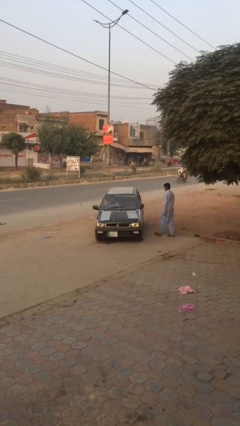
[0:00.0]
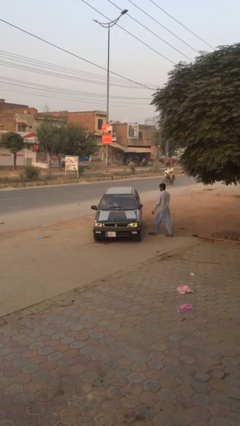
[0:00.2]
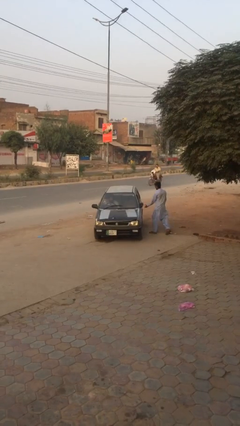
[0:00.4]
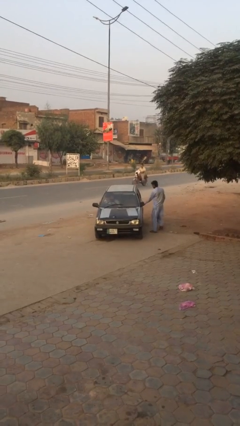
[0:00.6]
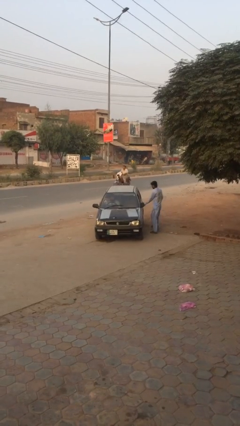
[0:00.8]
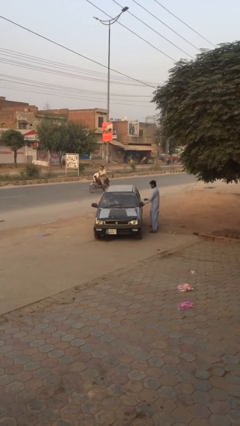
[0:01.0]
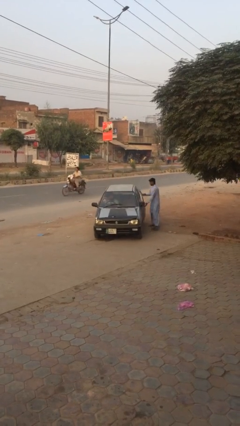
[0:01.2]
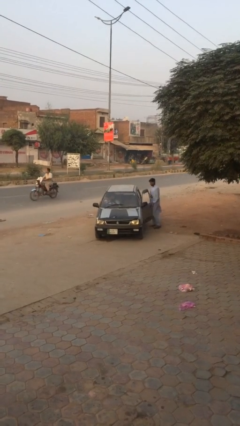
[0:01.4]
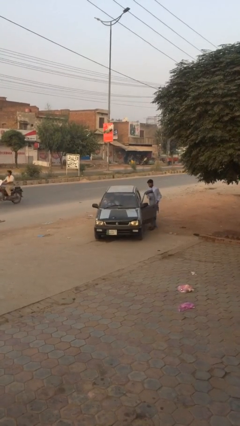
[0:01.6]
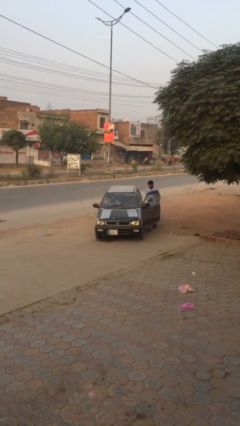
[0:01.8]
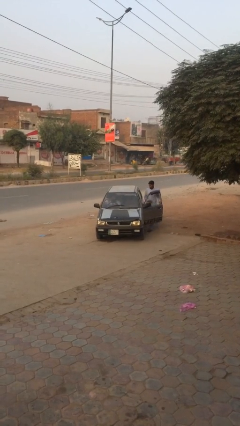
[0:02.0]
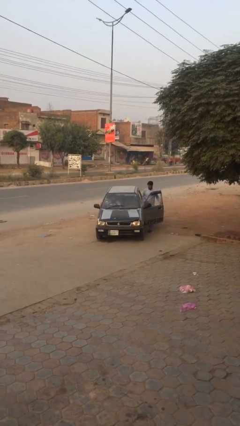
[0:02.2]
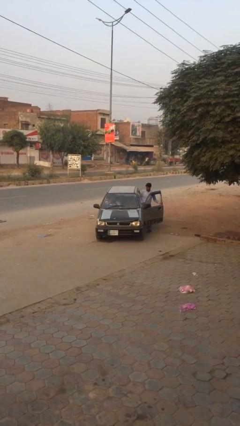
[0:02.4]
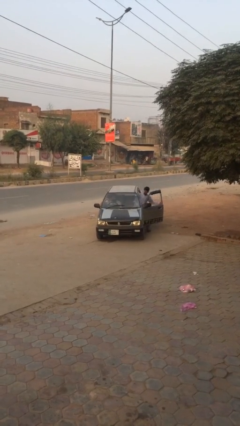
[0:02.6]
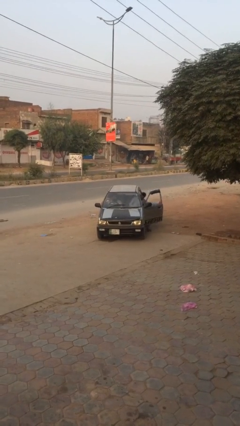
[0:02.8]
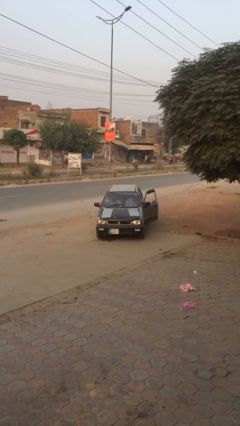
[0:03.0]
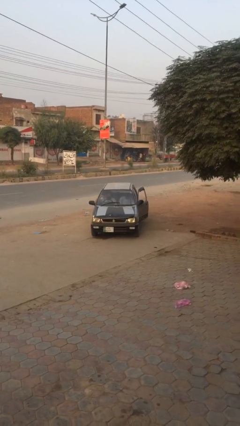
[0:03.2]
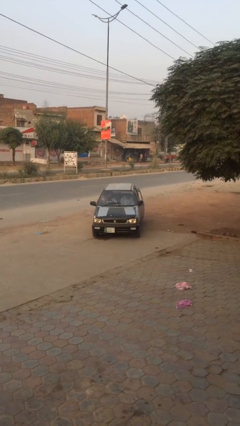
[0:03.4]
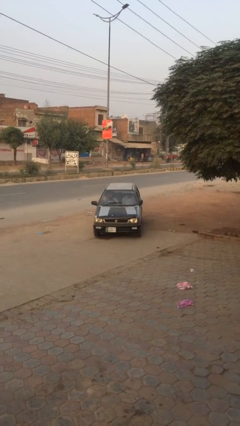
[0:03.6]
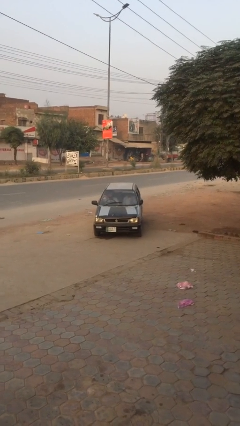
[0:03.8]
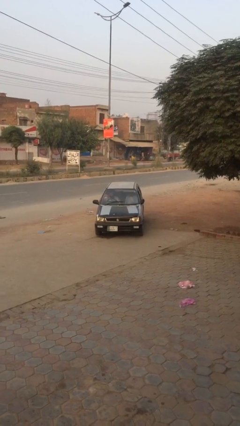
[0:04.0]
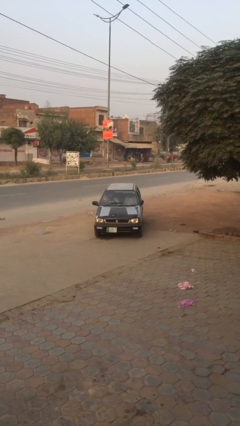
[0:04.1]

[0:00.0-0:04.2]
car picks up person

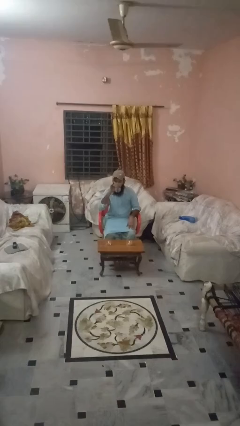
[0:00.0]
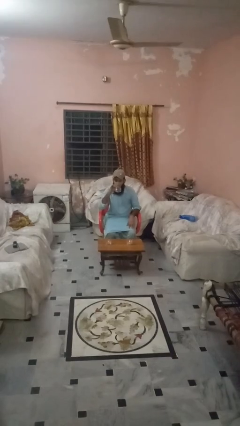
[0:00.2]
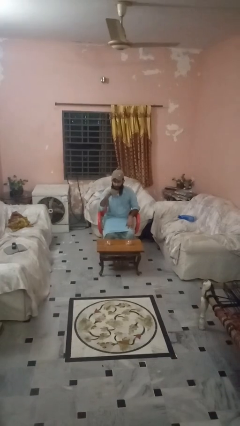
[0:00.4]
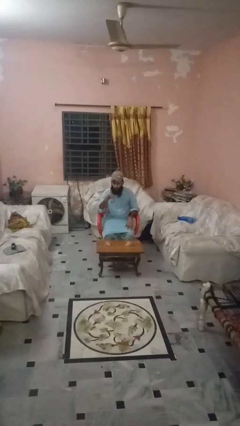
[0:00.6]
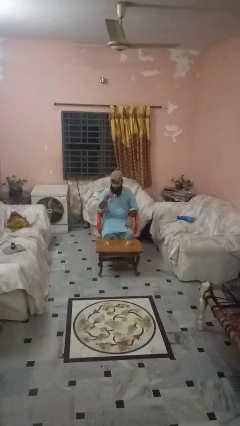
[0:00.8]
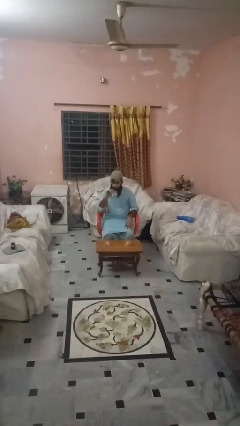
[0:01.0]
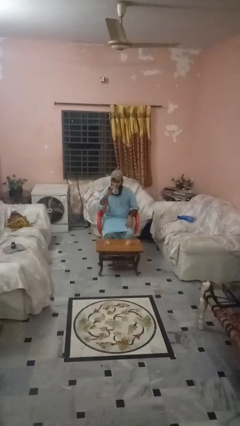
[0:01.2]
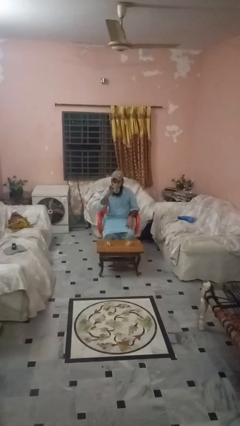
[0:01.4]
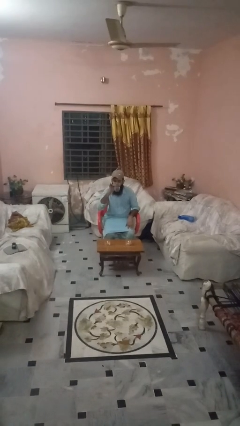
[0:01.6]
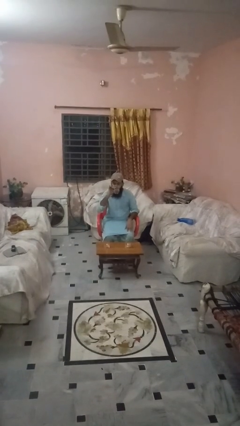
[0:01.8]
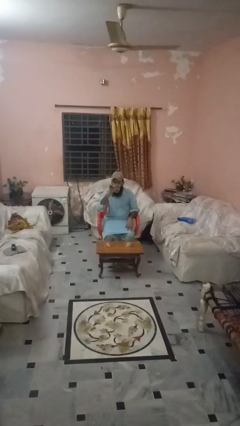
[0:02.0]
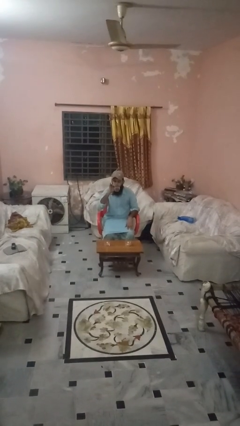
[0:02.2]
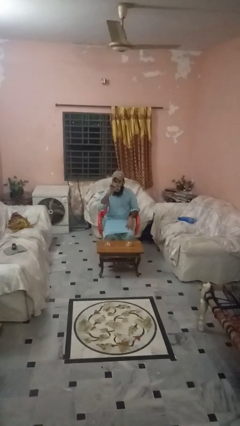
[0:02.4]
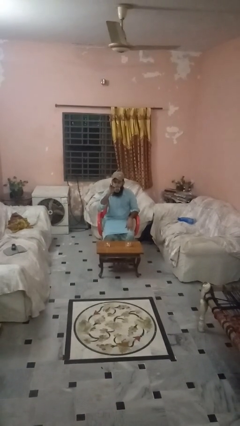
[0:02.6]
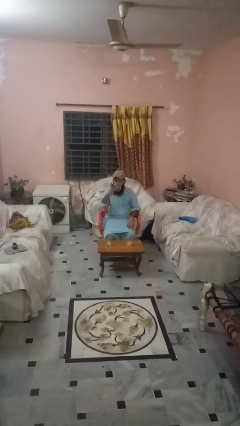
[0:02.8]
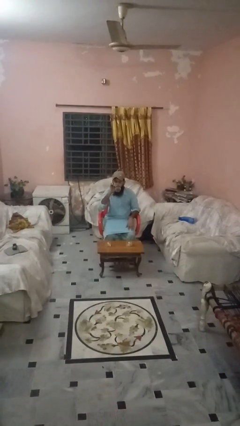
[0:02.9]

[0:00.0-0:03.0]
person drinks from shotglass

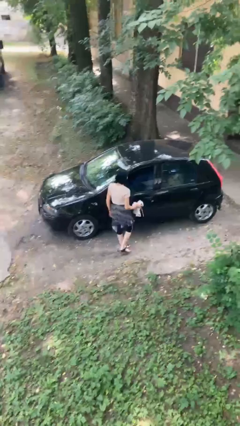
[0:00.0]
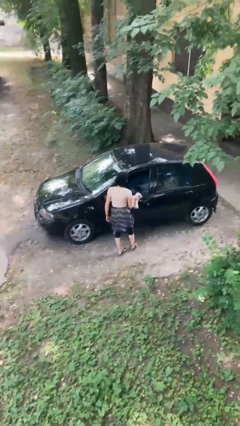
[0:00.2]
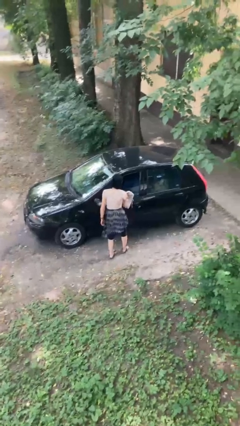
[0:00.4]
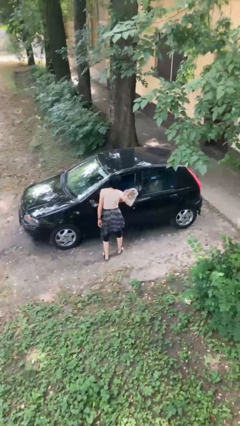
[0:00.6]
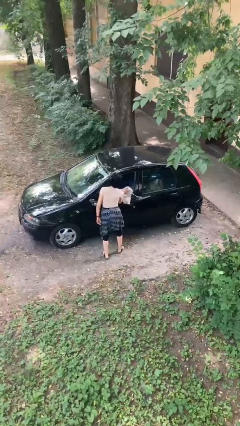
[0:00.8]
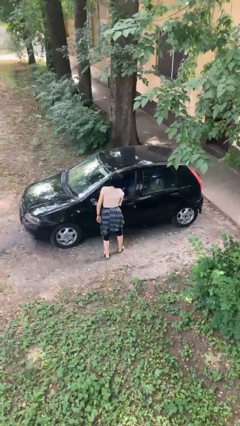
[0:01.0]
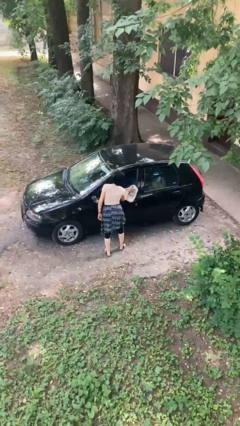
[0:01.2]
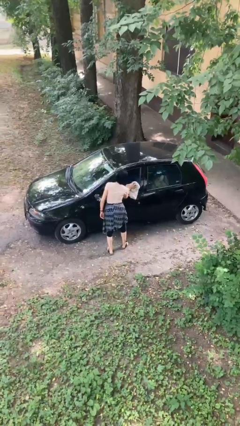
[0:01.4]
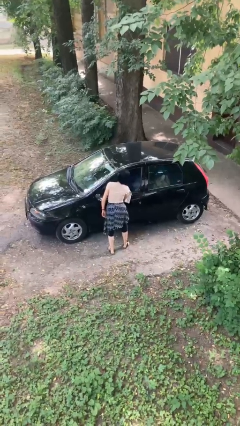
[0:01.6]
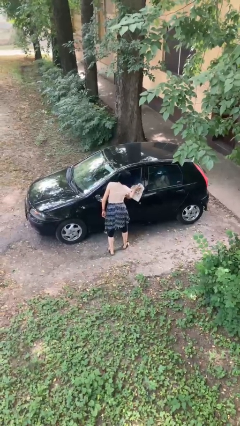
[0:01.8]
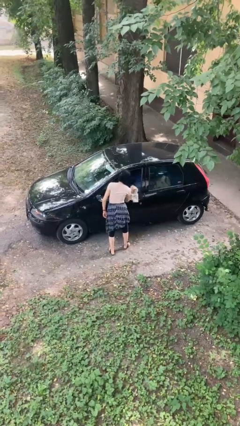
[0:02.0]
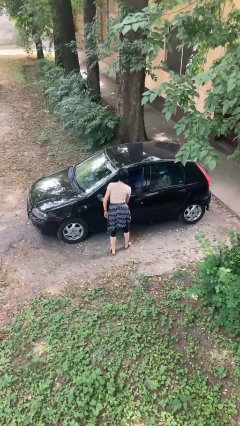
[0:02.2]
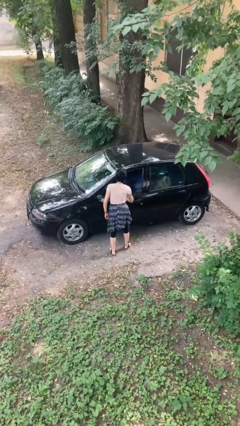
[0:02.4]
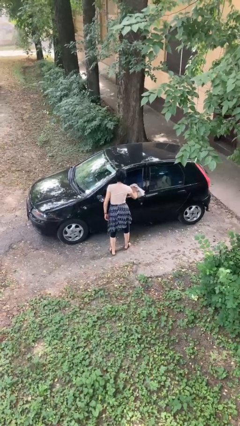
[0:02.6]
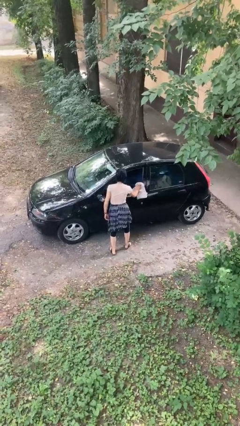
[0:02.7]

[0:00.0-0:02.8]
person polishes car with rag

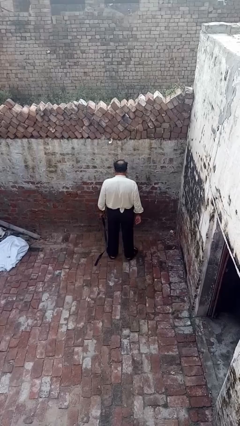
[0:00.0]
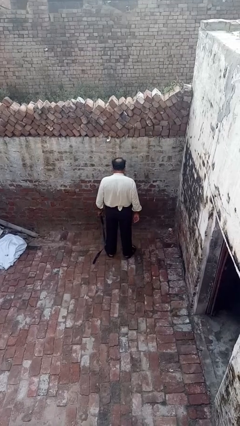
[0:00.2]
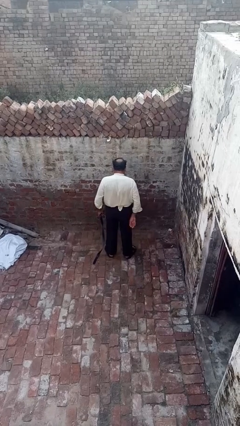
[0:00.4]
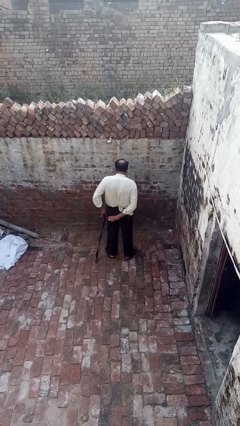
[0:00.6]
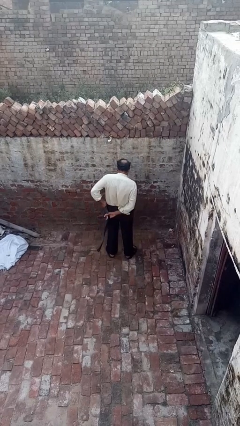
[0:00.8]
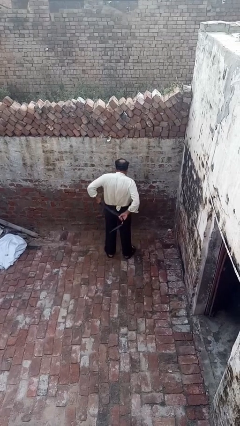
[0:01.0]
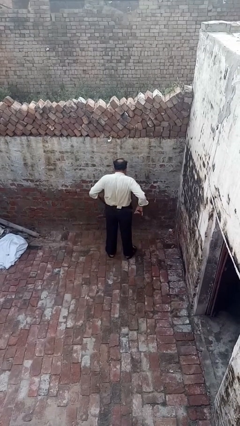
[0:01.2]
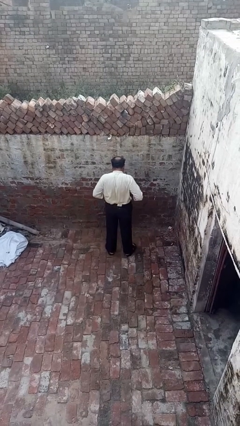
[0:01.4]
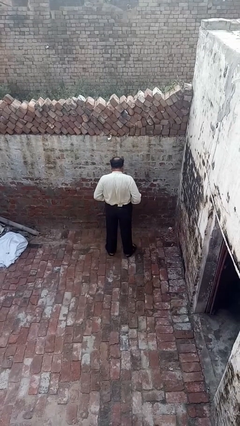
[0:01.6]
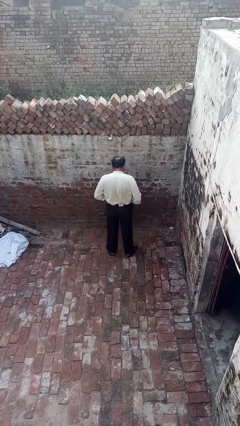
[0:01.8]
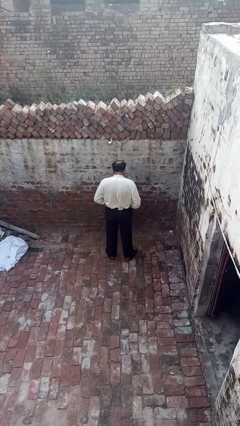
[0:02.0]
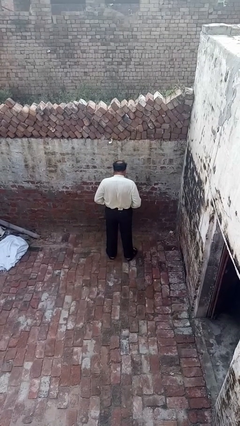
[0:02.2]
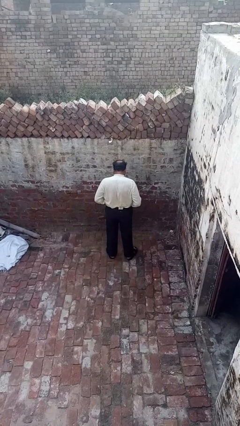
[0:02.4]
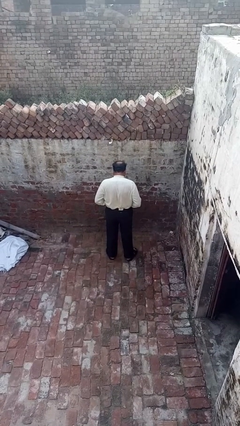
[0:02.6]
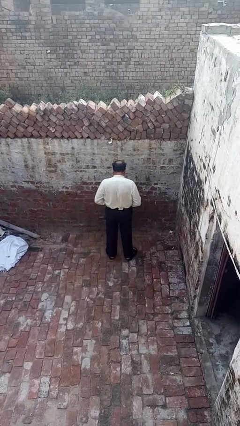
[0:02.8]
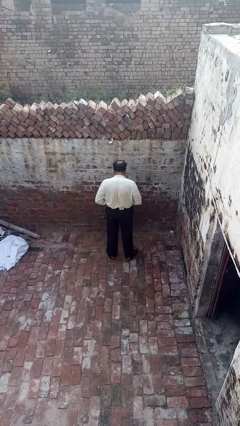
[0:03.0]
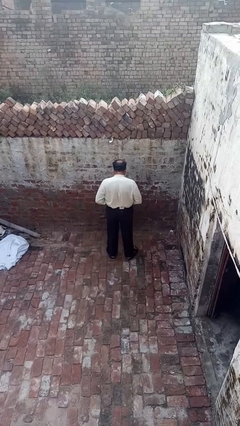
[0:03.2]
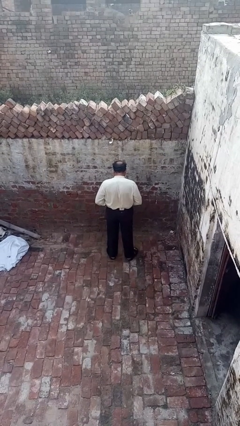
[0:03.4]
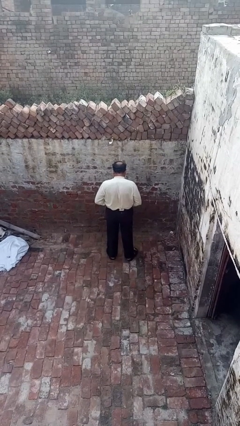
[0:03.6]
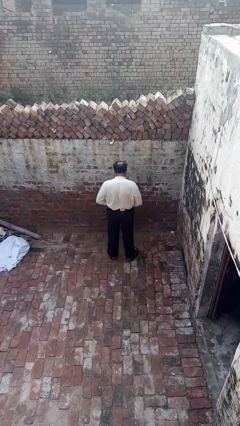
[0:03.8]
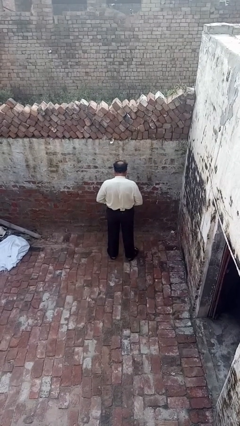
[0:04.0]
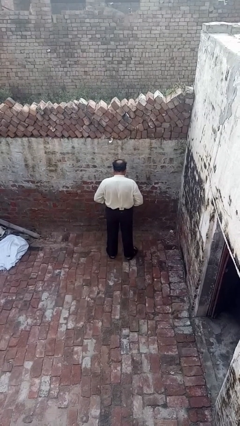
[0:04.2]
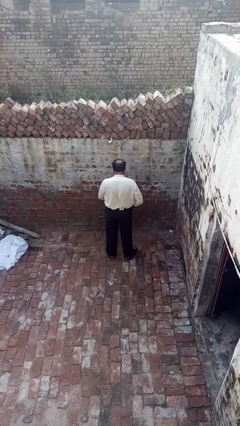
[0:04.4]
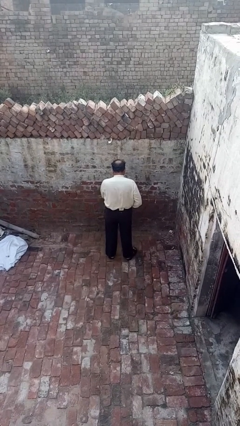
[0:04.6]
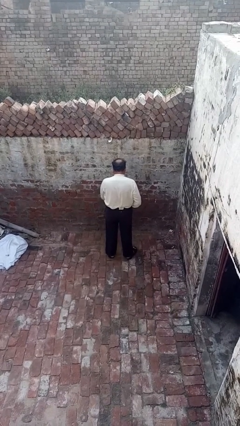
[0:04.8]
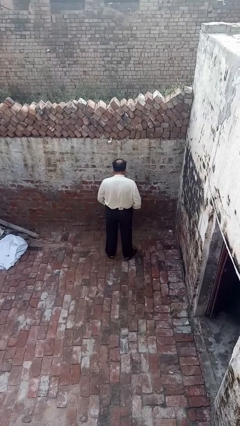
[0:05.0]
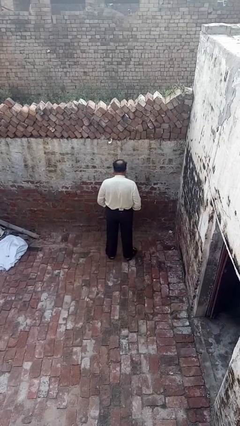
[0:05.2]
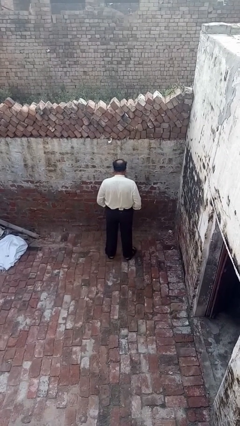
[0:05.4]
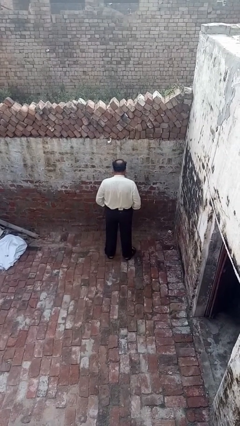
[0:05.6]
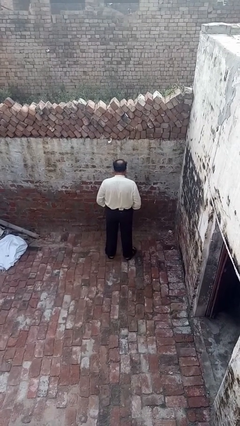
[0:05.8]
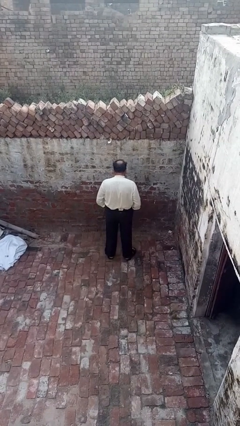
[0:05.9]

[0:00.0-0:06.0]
person puts on belt

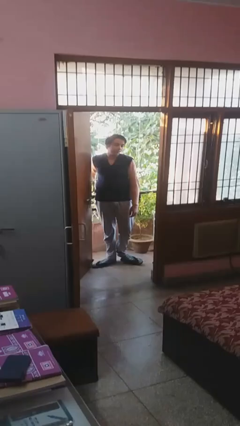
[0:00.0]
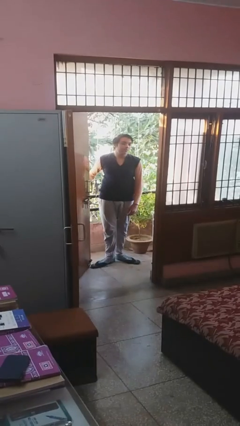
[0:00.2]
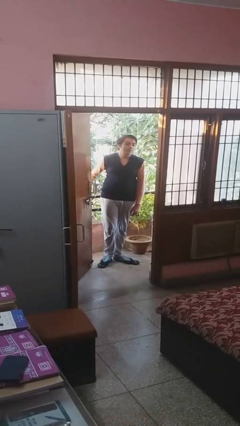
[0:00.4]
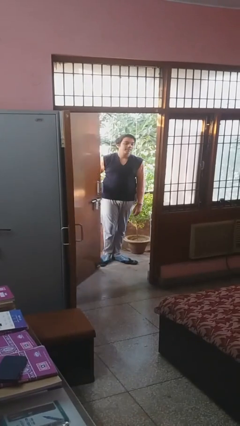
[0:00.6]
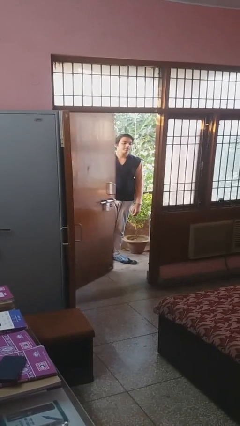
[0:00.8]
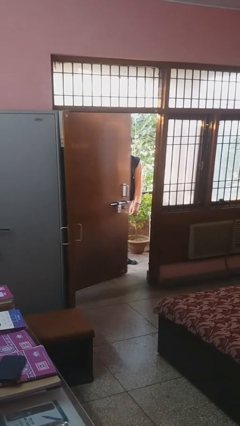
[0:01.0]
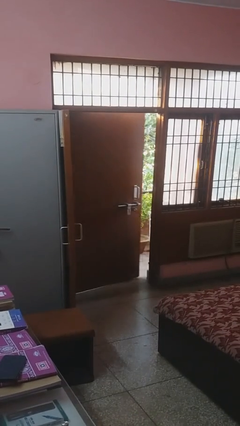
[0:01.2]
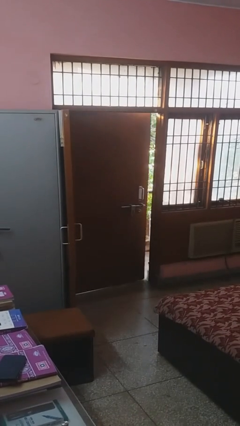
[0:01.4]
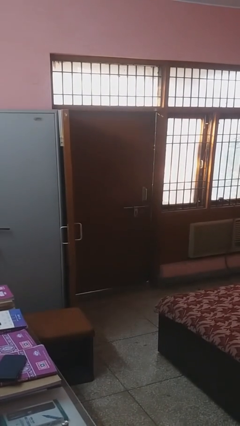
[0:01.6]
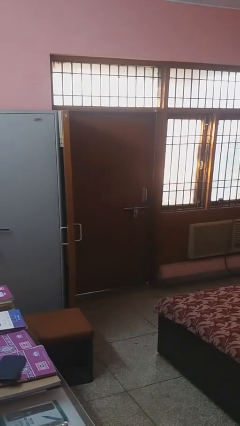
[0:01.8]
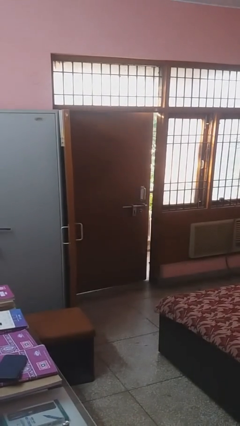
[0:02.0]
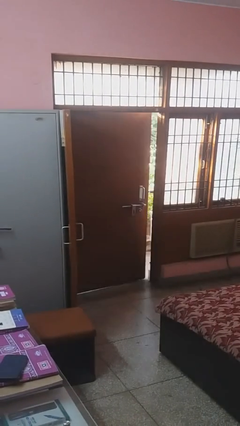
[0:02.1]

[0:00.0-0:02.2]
person closes facility door
